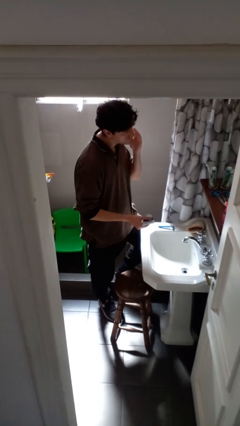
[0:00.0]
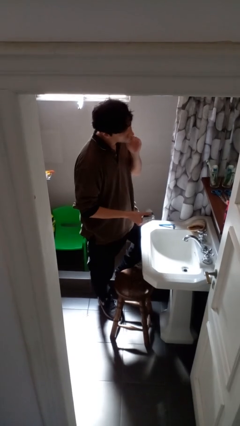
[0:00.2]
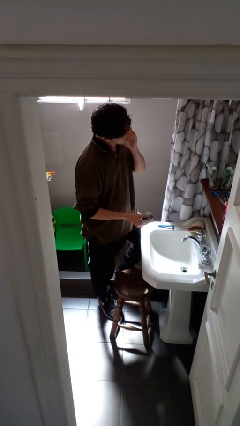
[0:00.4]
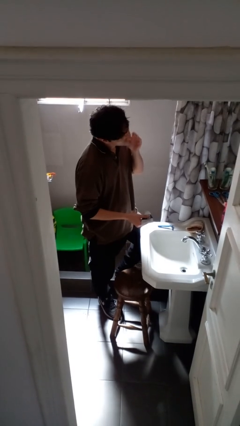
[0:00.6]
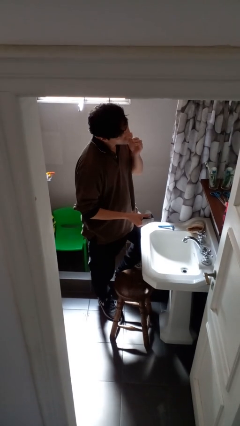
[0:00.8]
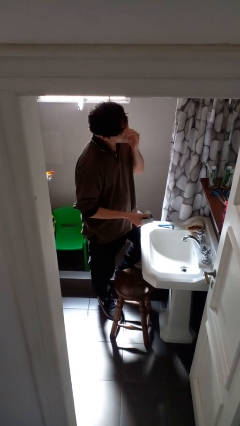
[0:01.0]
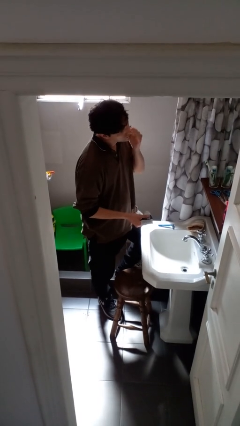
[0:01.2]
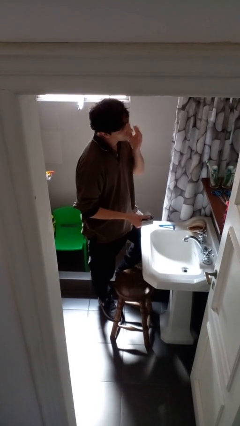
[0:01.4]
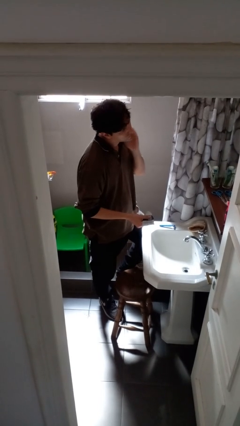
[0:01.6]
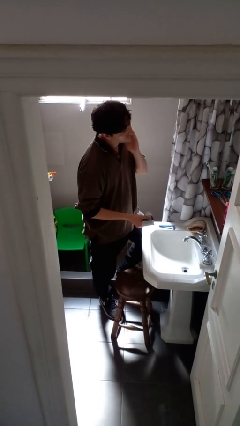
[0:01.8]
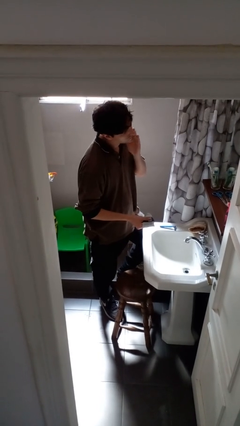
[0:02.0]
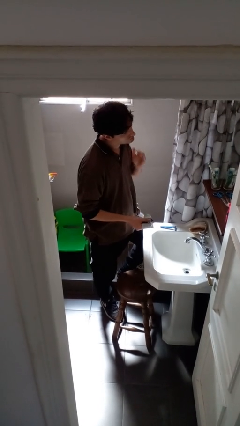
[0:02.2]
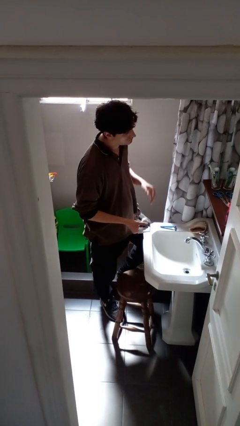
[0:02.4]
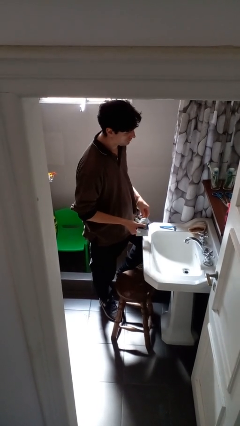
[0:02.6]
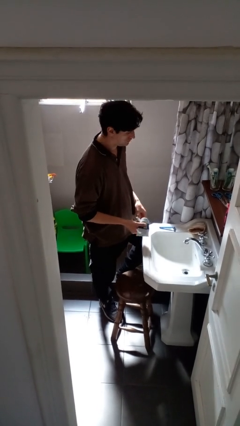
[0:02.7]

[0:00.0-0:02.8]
person applies shaving cream

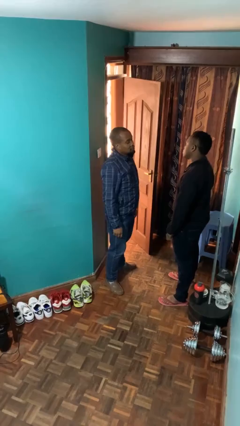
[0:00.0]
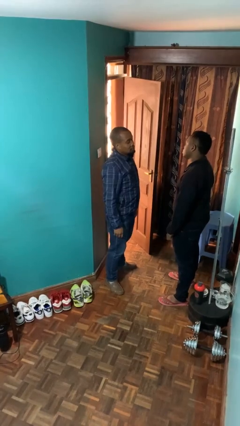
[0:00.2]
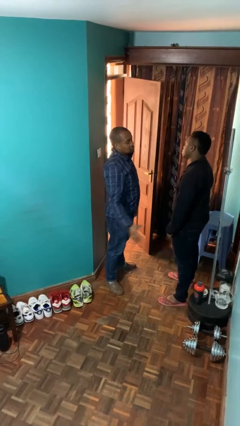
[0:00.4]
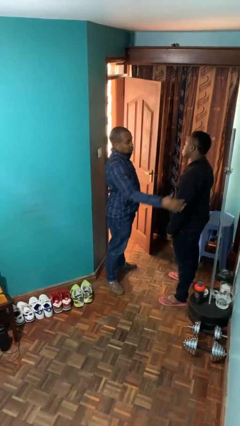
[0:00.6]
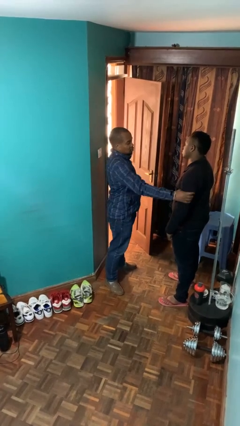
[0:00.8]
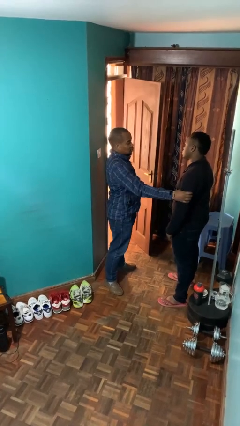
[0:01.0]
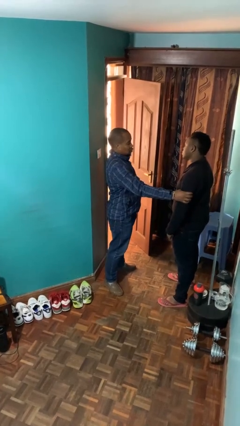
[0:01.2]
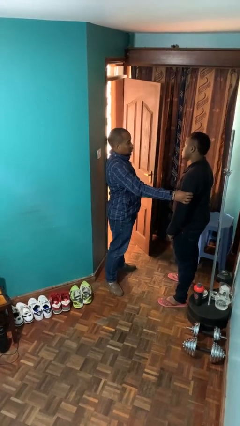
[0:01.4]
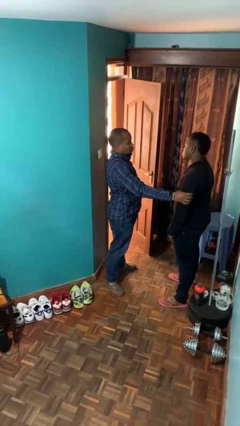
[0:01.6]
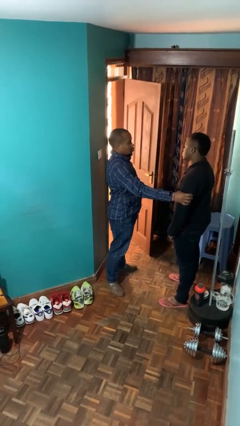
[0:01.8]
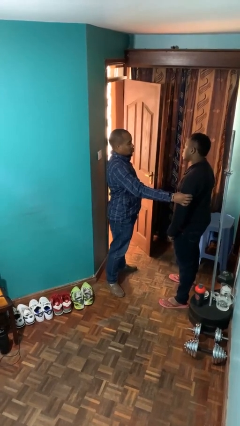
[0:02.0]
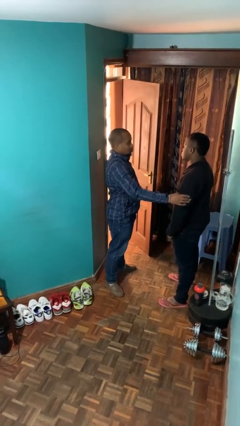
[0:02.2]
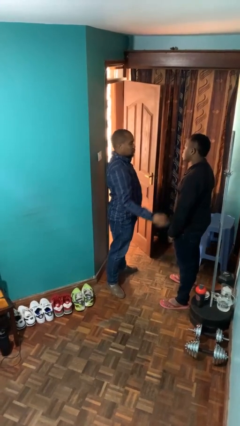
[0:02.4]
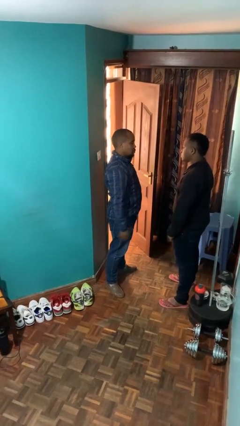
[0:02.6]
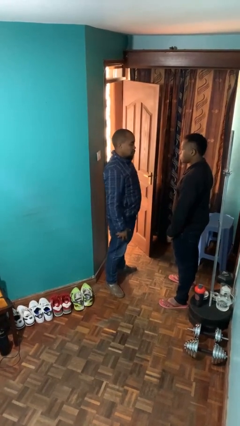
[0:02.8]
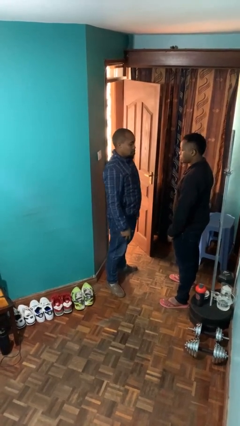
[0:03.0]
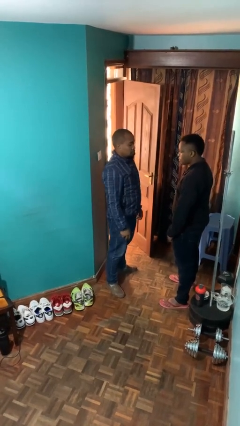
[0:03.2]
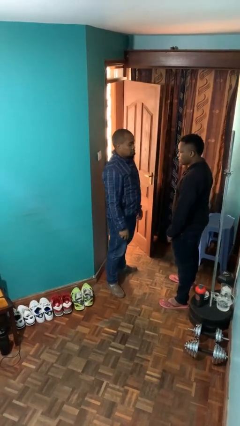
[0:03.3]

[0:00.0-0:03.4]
person grabs person by bicep

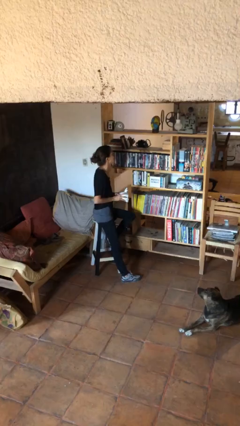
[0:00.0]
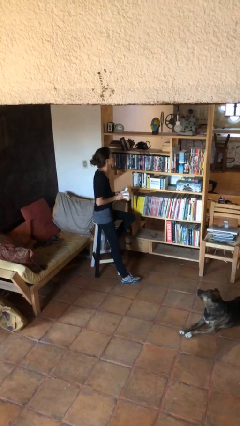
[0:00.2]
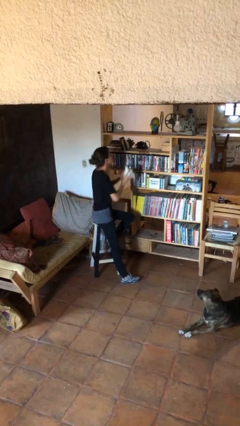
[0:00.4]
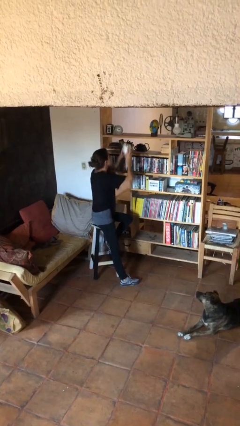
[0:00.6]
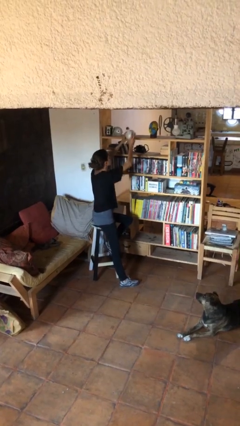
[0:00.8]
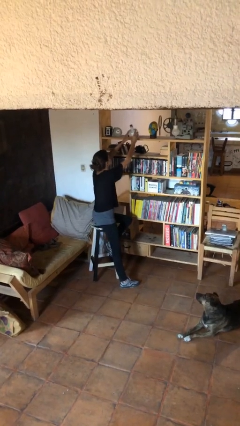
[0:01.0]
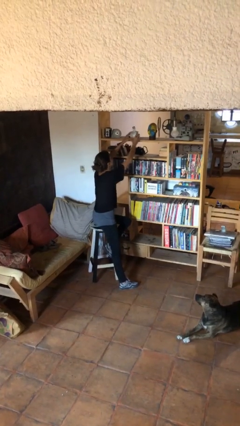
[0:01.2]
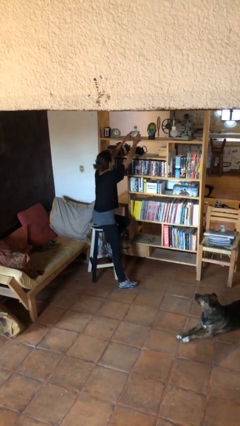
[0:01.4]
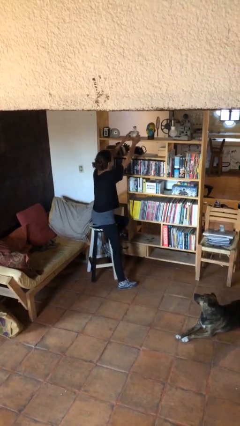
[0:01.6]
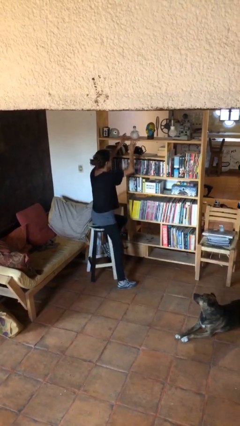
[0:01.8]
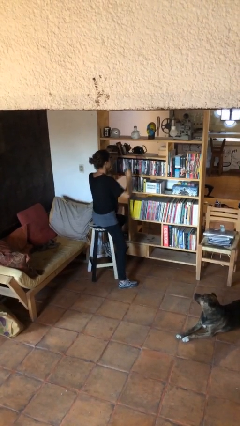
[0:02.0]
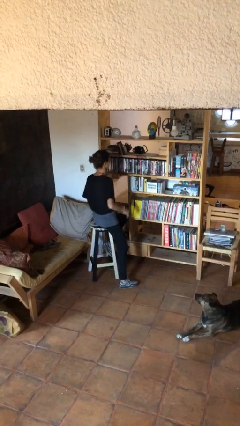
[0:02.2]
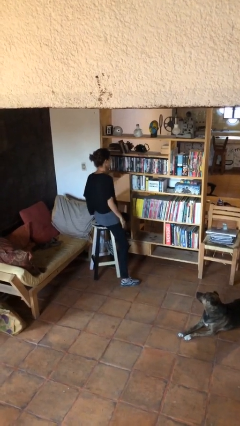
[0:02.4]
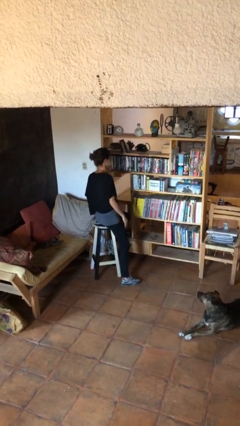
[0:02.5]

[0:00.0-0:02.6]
person puts down object on countertop

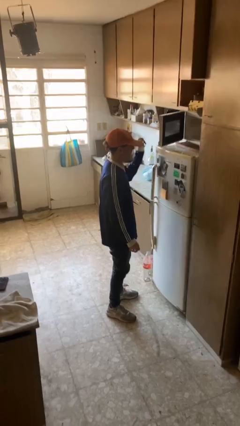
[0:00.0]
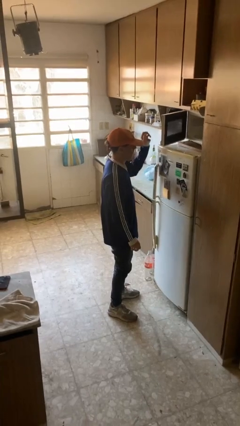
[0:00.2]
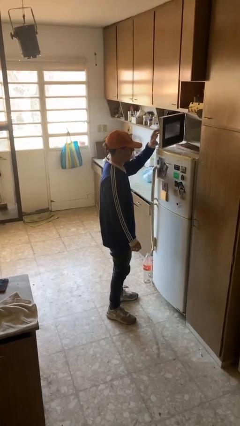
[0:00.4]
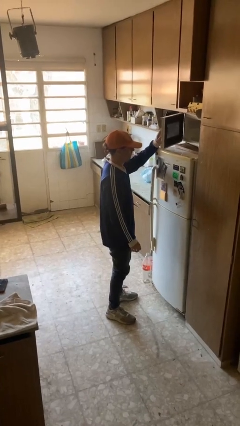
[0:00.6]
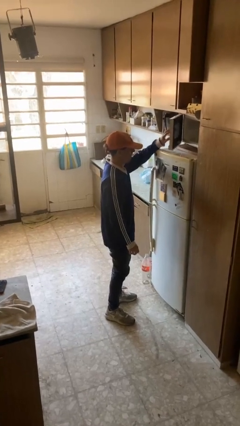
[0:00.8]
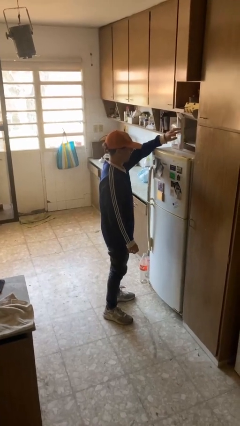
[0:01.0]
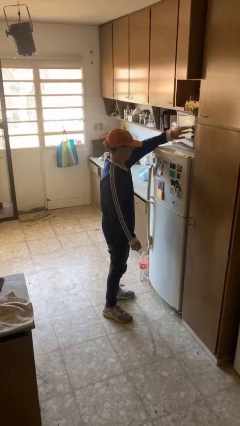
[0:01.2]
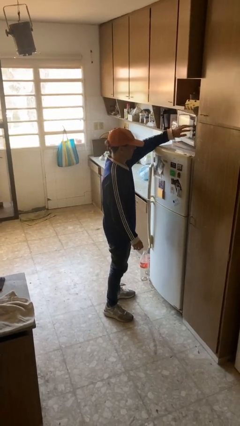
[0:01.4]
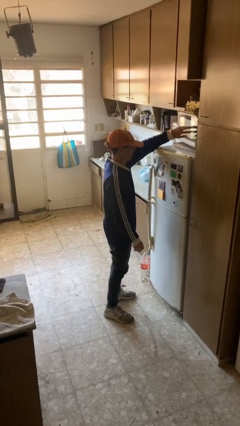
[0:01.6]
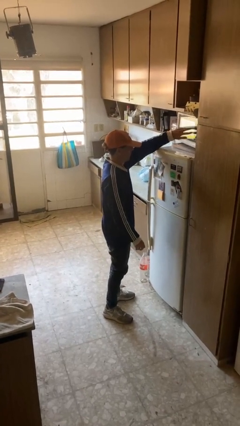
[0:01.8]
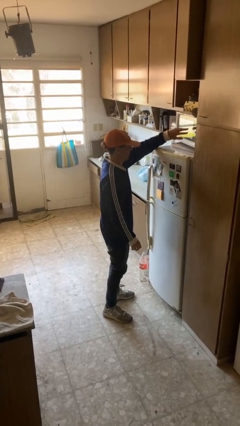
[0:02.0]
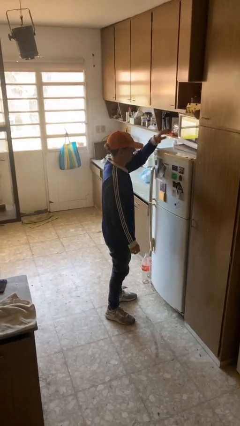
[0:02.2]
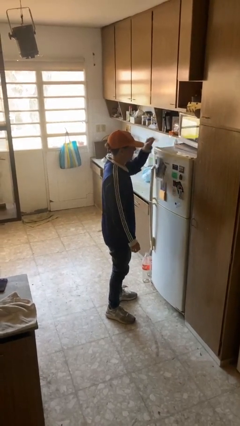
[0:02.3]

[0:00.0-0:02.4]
person closes microwave

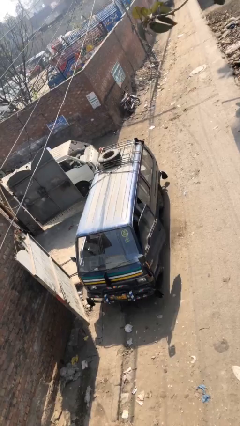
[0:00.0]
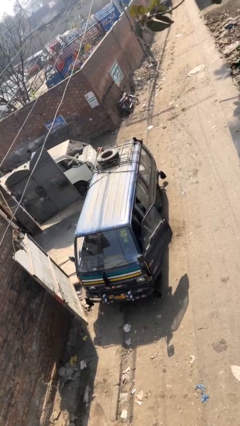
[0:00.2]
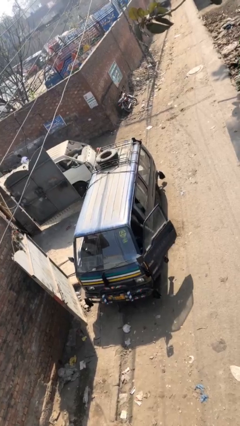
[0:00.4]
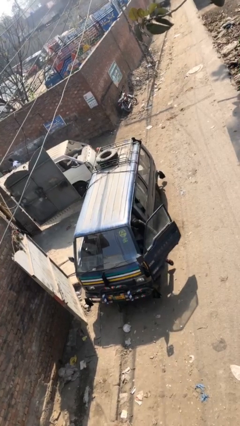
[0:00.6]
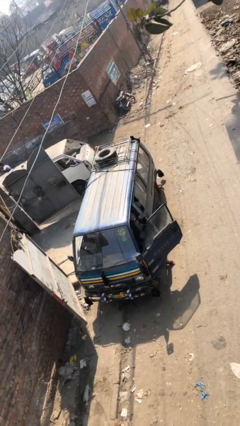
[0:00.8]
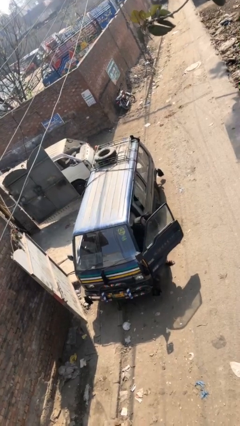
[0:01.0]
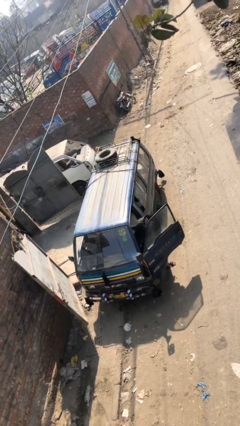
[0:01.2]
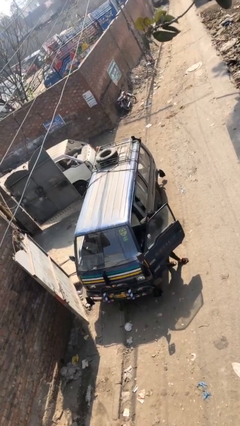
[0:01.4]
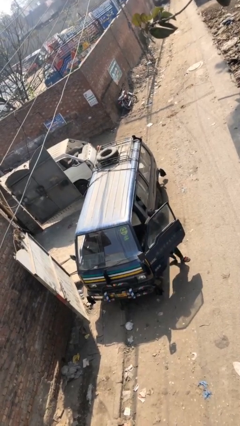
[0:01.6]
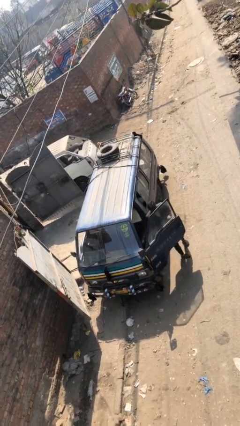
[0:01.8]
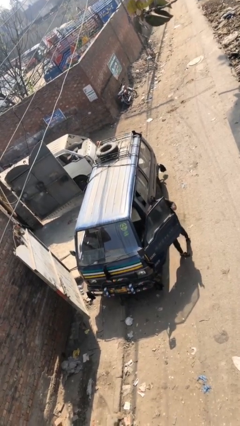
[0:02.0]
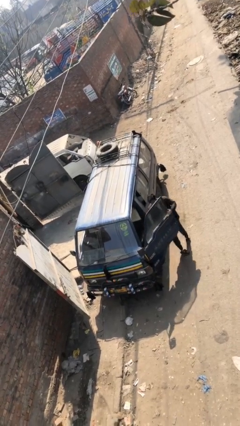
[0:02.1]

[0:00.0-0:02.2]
car drops off person

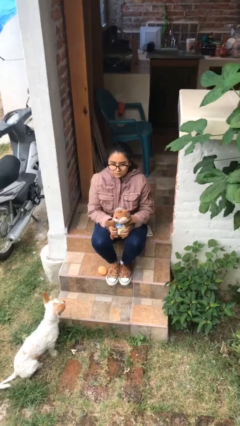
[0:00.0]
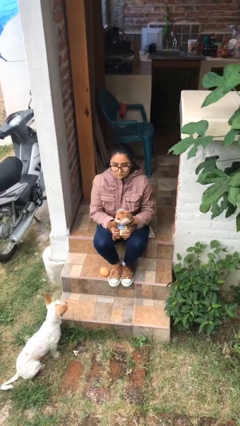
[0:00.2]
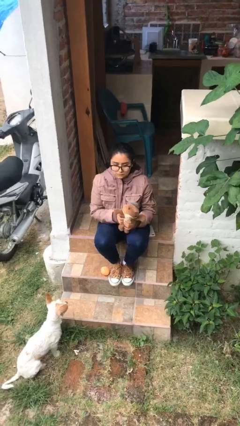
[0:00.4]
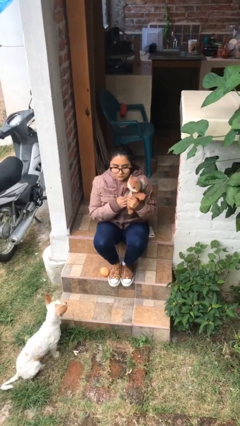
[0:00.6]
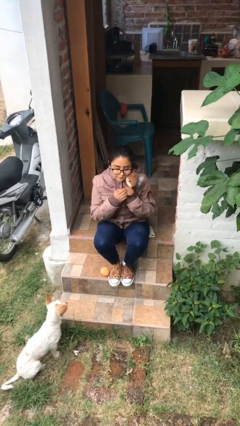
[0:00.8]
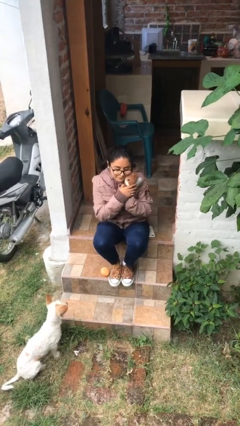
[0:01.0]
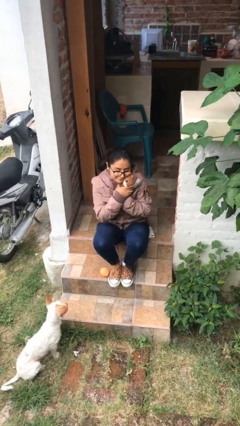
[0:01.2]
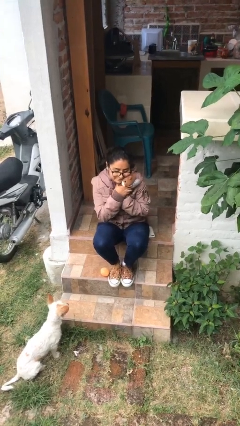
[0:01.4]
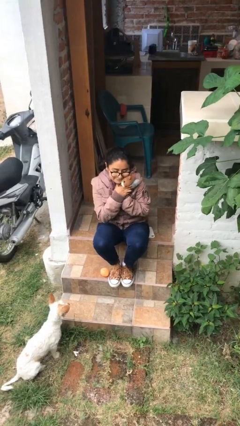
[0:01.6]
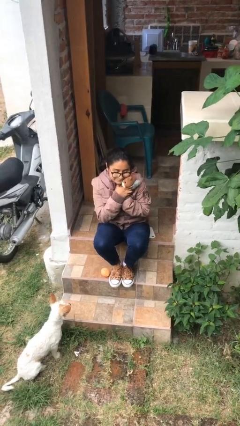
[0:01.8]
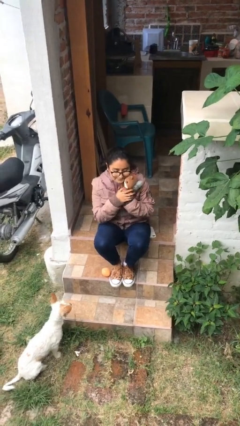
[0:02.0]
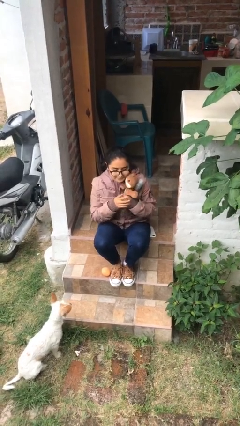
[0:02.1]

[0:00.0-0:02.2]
person hugs stuffed animal

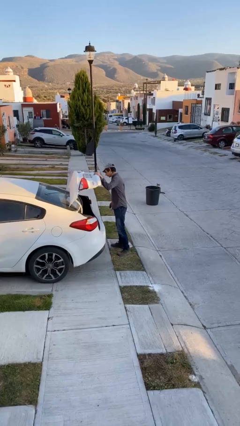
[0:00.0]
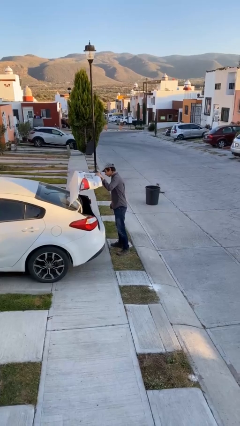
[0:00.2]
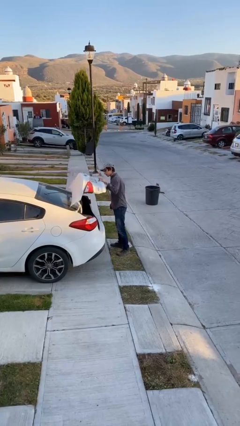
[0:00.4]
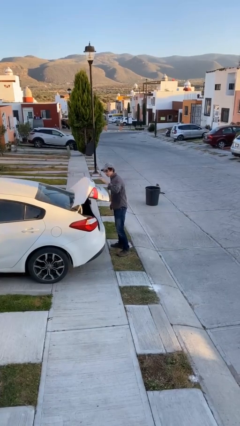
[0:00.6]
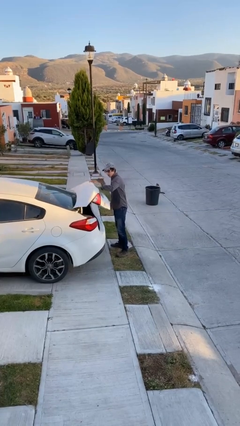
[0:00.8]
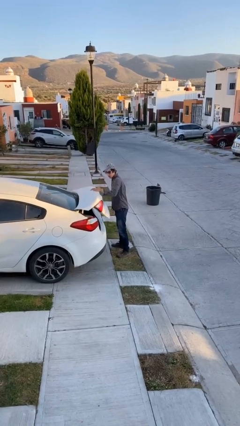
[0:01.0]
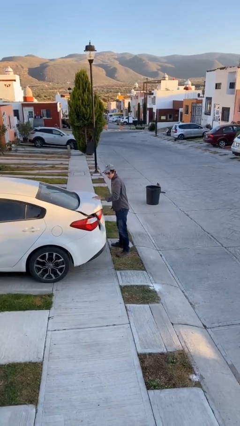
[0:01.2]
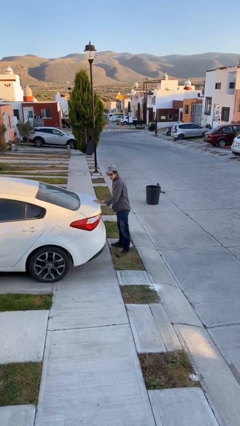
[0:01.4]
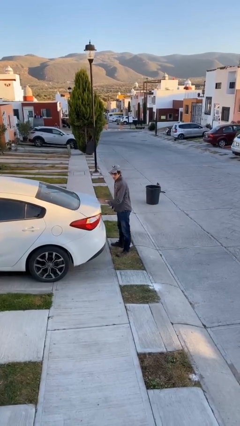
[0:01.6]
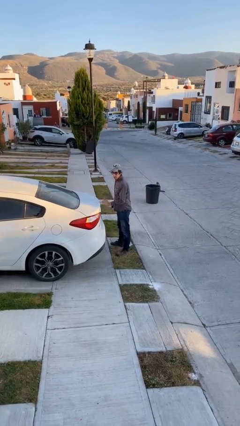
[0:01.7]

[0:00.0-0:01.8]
person closes car trunk
